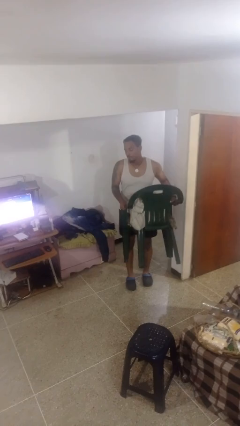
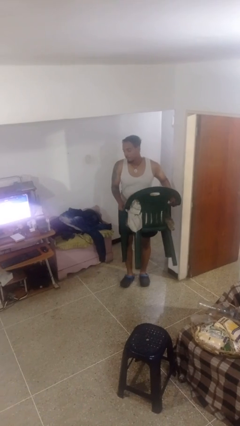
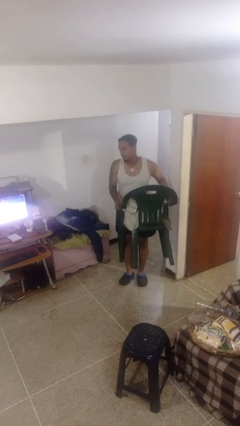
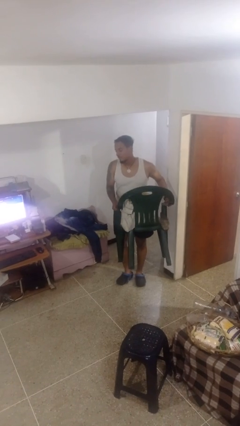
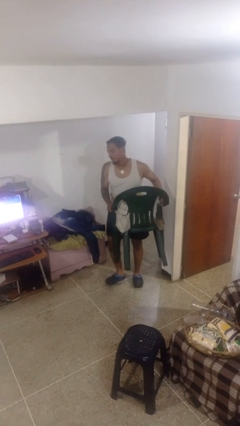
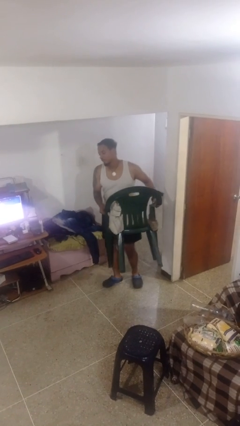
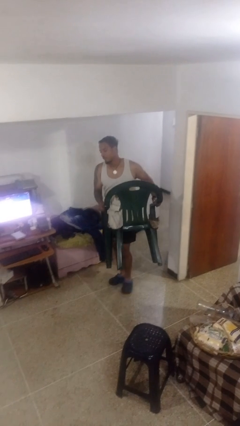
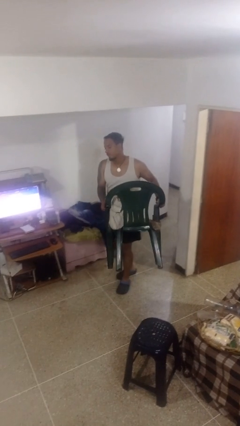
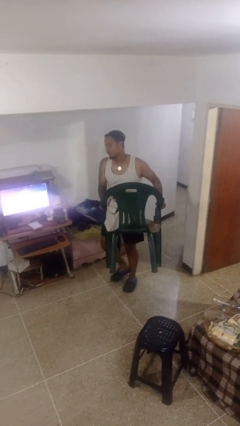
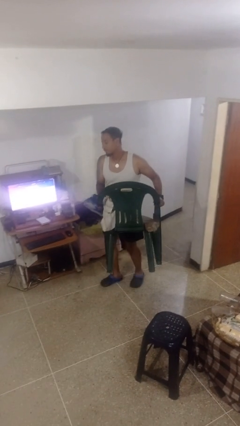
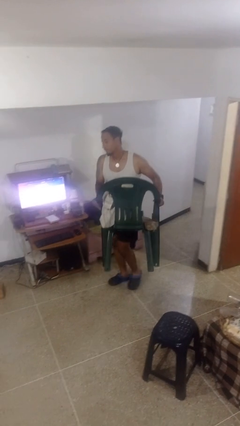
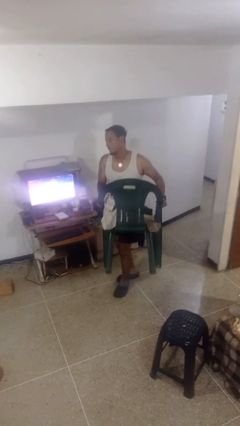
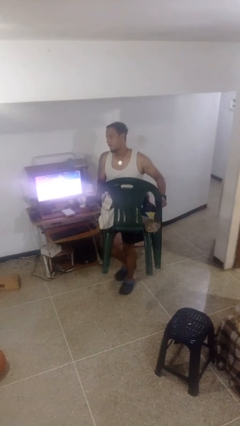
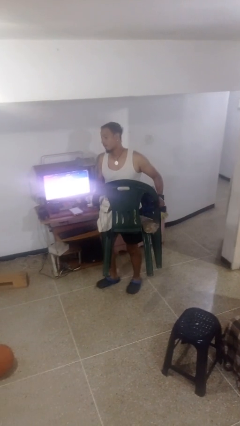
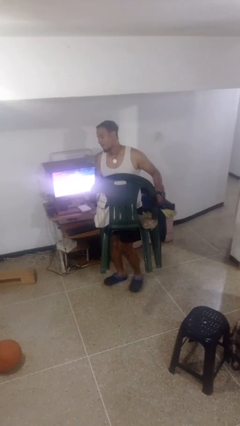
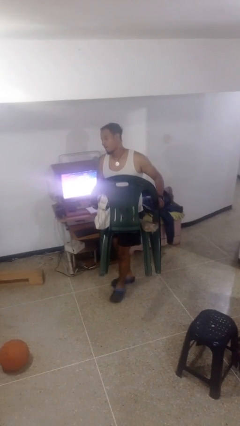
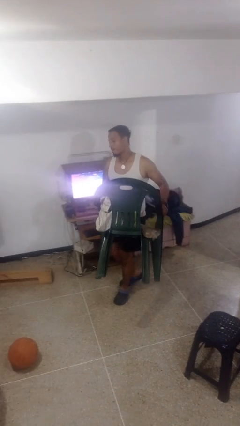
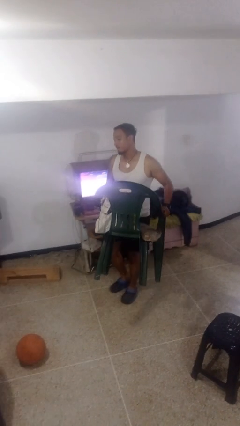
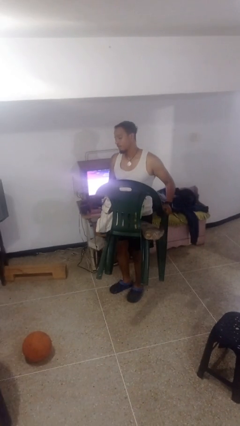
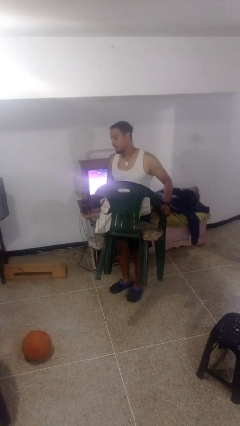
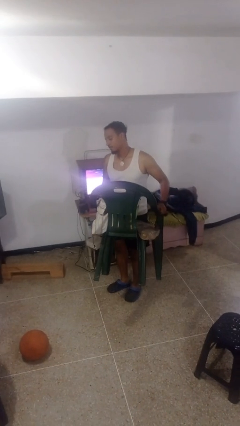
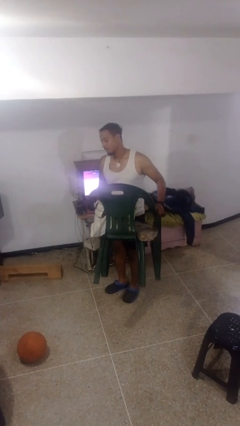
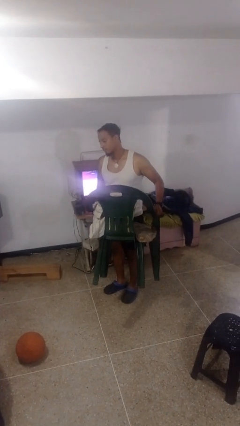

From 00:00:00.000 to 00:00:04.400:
person carries furniture

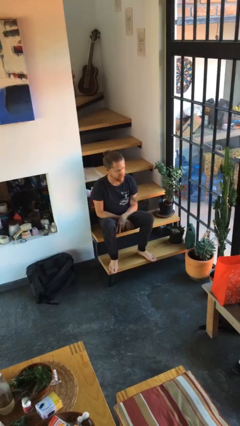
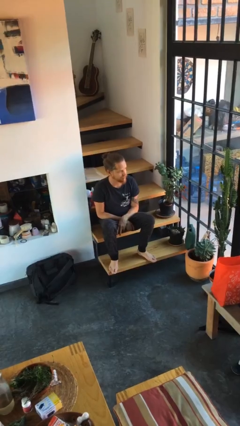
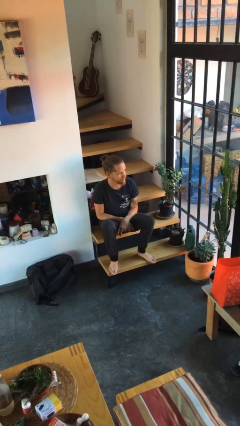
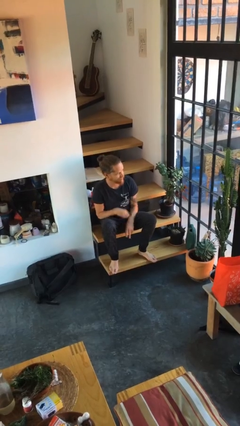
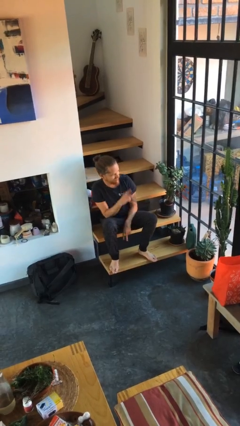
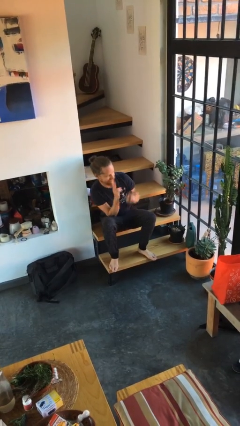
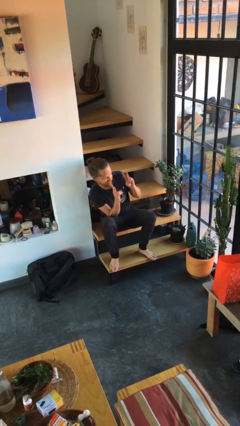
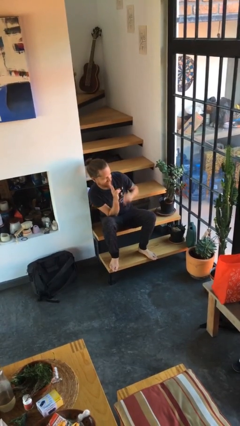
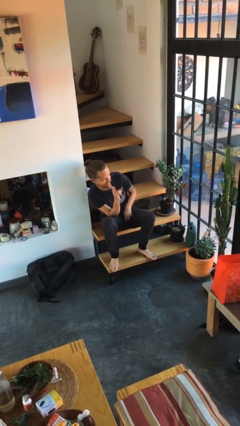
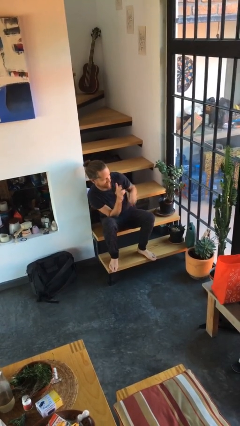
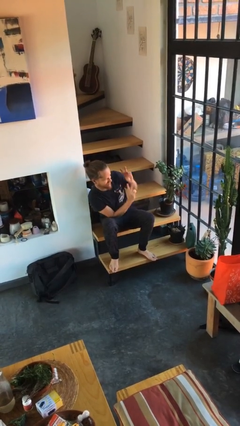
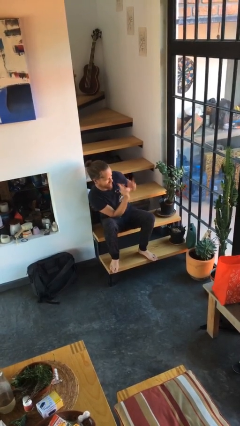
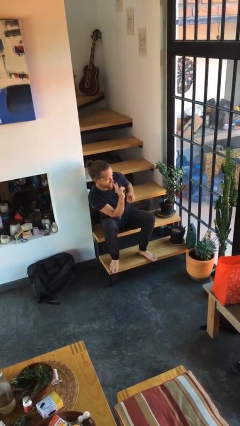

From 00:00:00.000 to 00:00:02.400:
person gestures peace

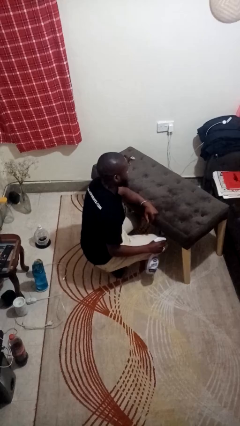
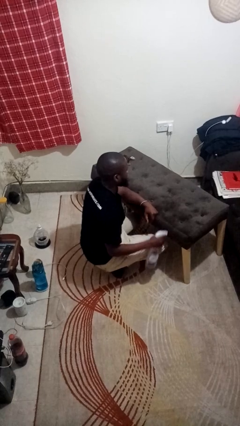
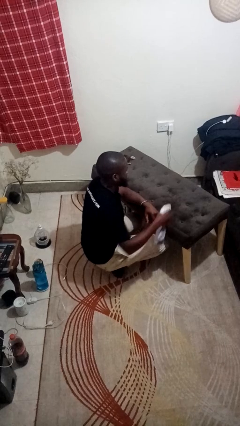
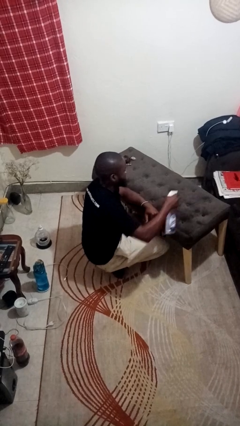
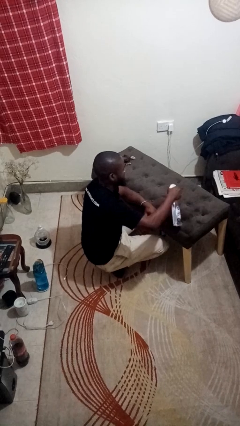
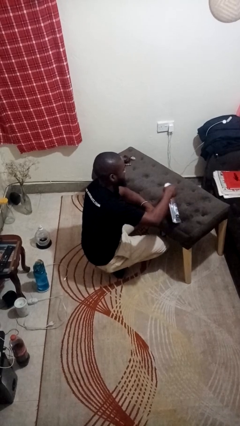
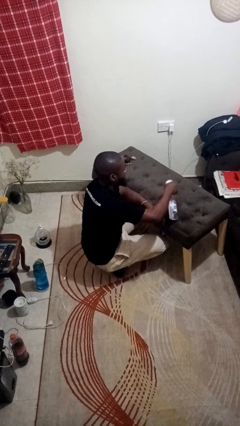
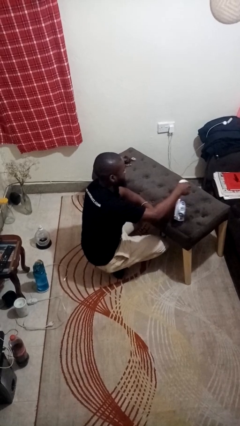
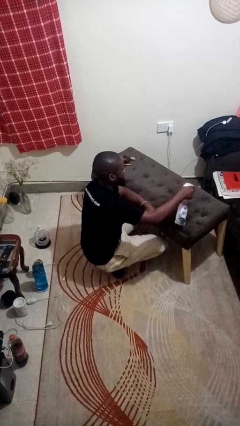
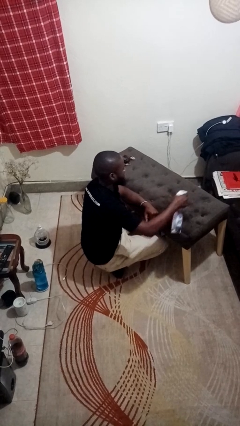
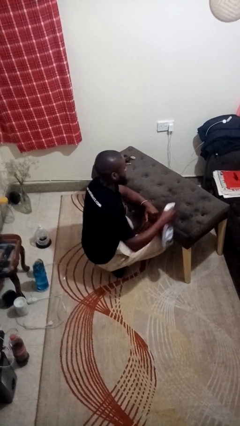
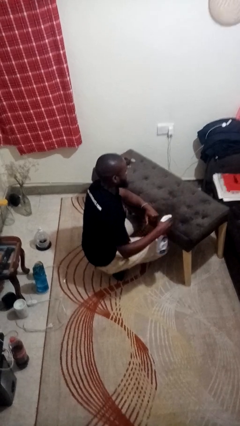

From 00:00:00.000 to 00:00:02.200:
person sprays from bottle

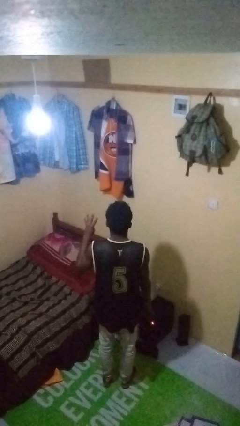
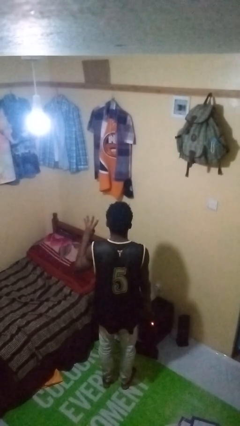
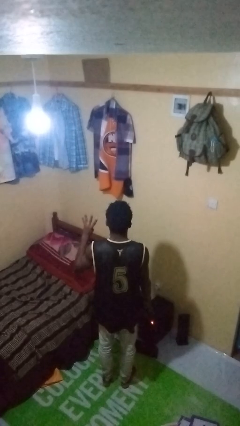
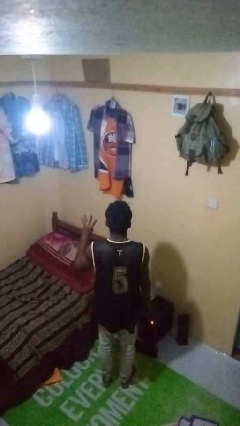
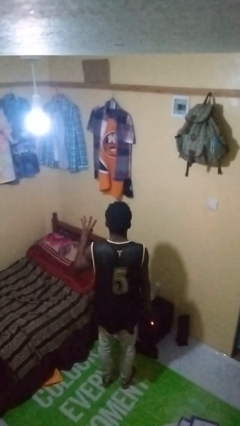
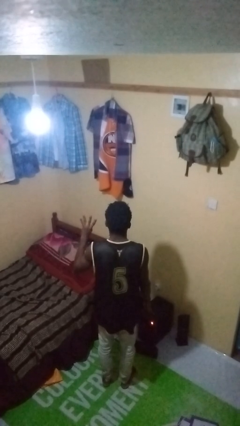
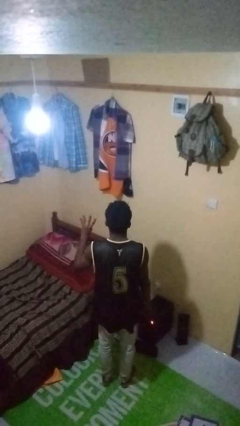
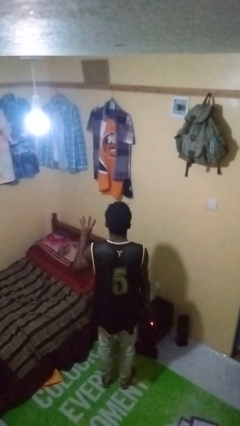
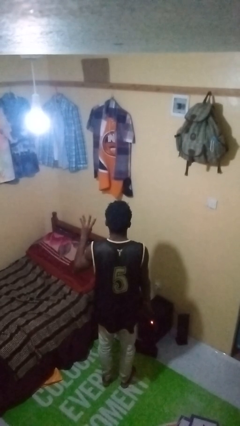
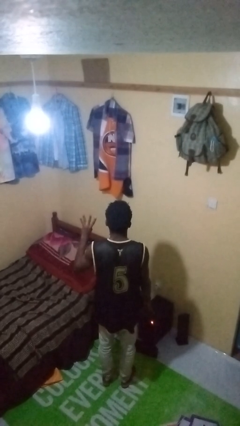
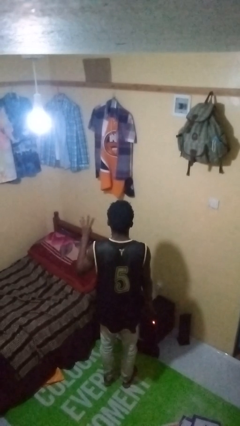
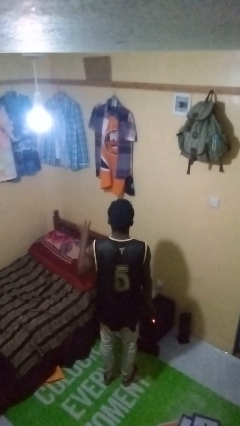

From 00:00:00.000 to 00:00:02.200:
person gestures number four

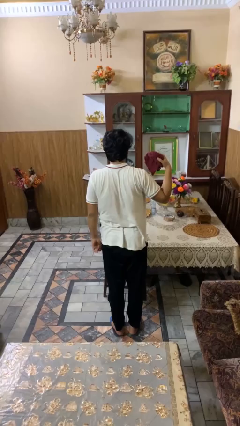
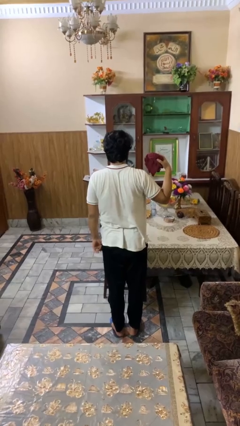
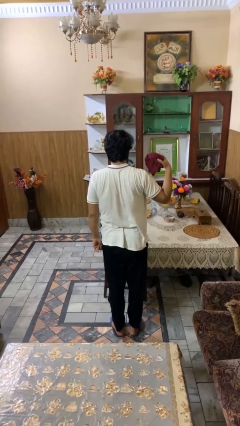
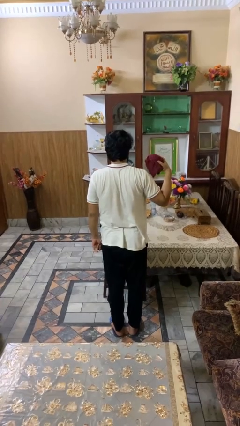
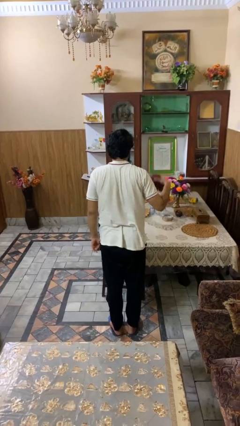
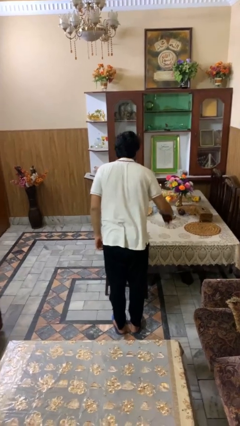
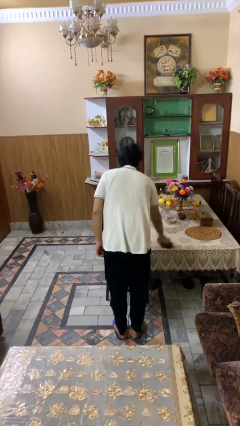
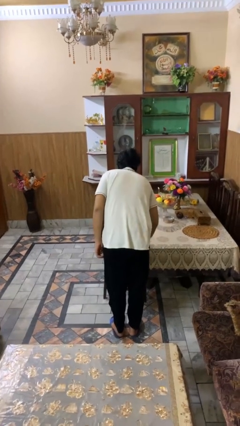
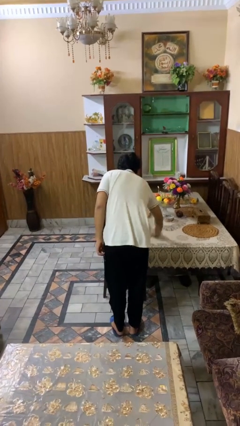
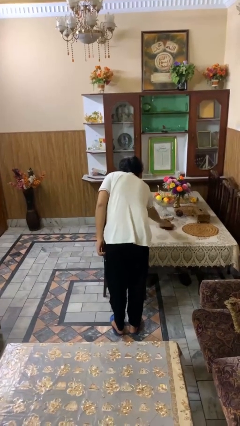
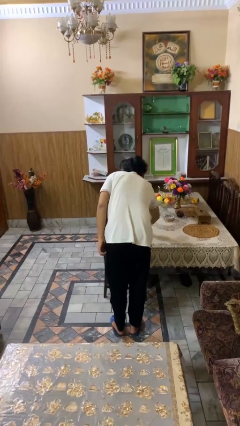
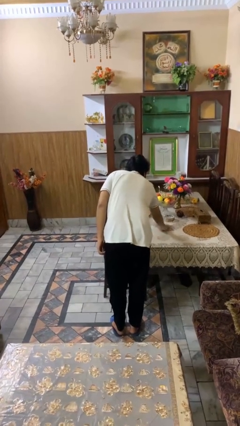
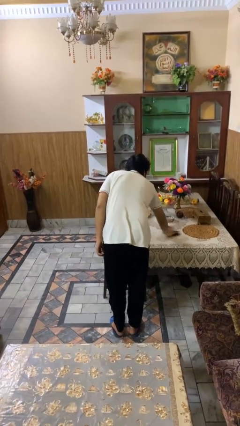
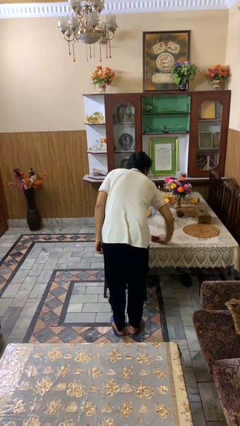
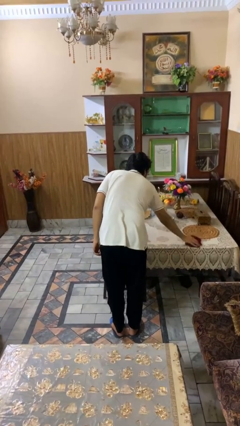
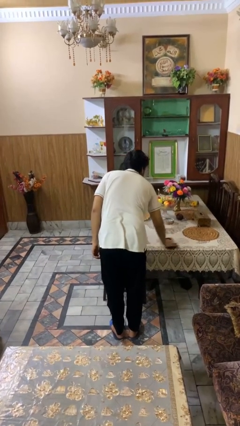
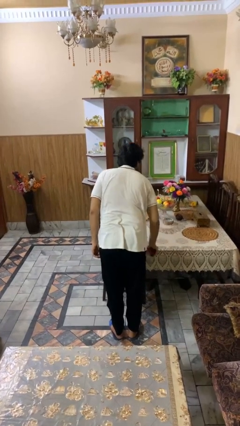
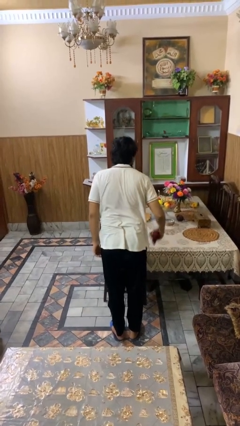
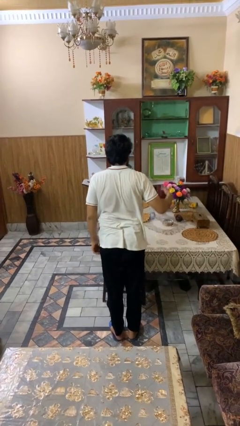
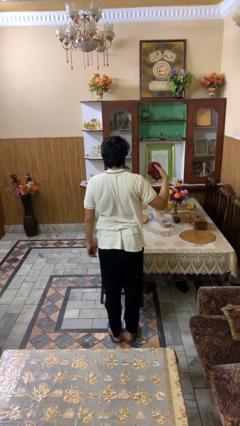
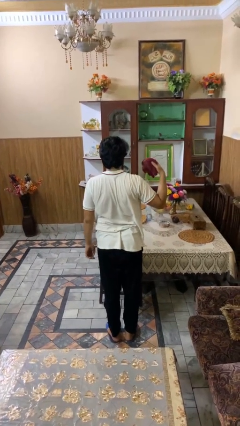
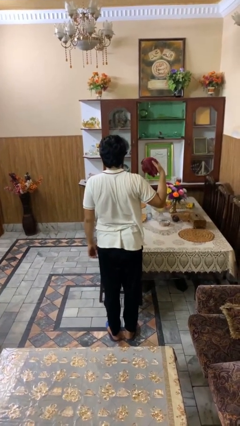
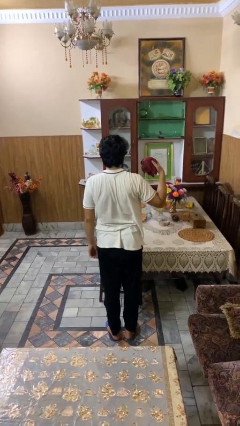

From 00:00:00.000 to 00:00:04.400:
person cleans table with rag

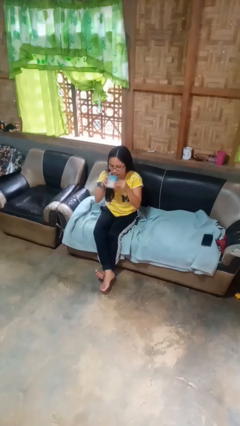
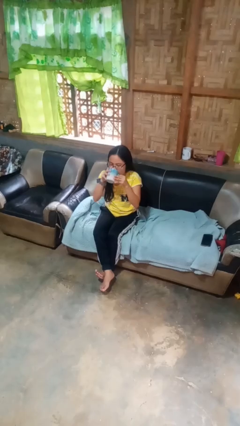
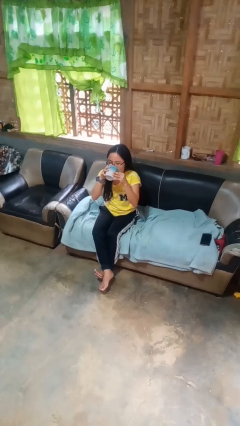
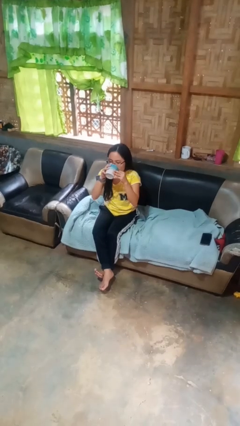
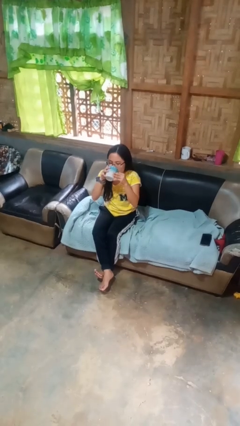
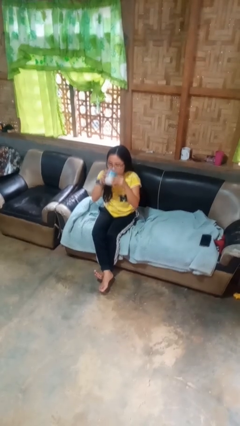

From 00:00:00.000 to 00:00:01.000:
person drinks from mug

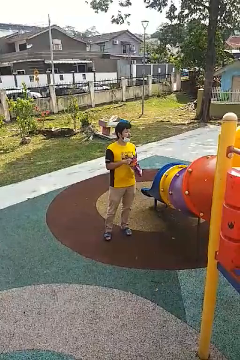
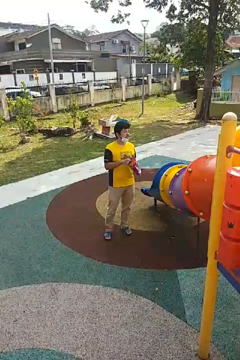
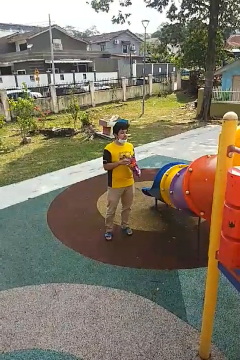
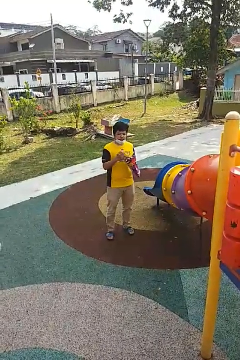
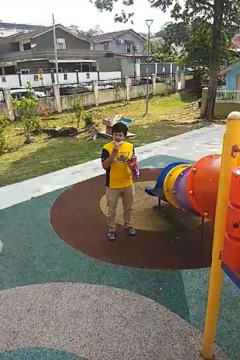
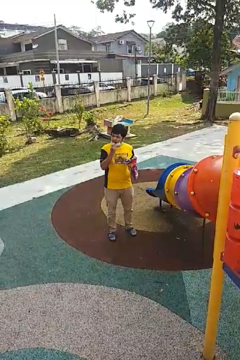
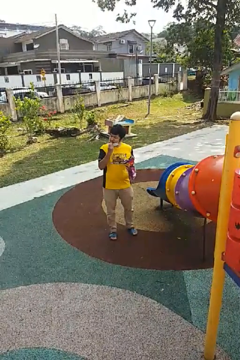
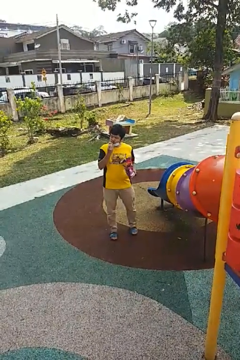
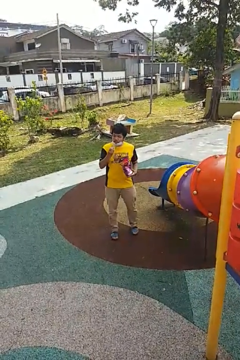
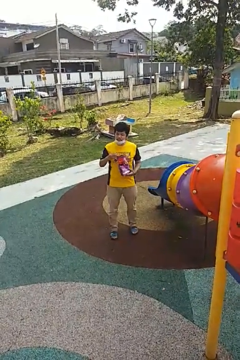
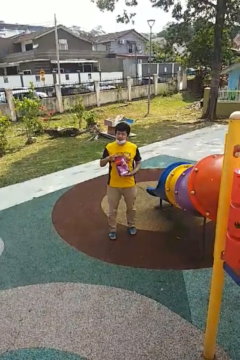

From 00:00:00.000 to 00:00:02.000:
person eats snack from bag
